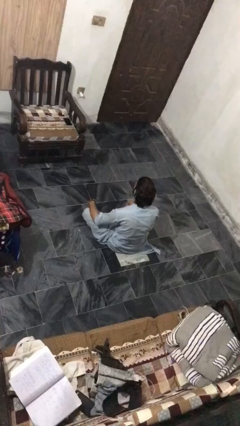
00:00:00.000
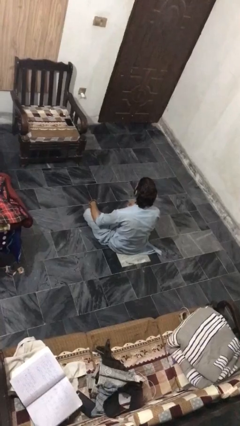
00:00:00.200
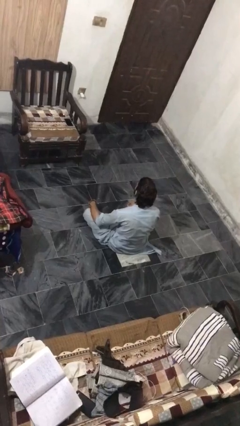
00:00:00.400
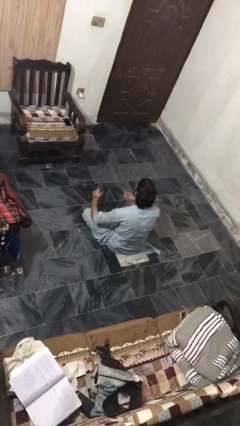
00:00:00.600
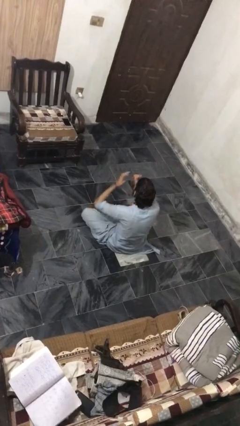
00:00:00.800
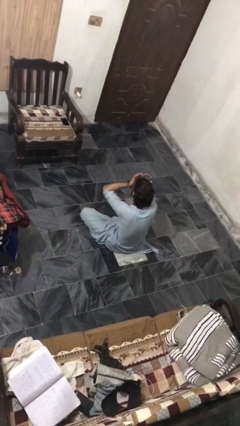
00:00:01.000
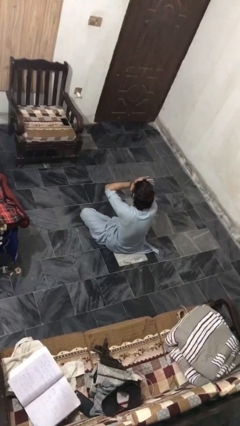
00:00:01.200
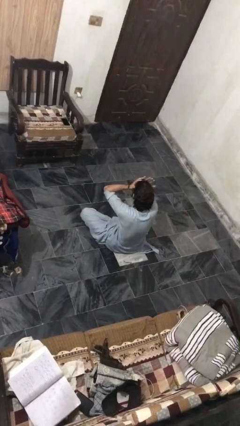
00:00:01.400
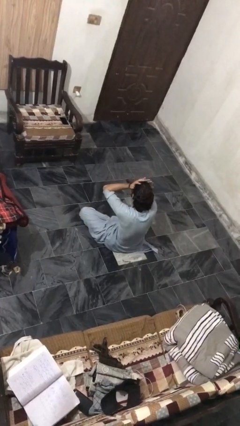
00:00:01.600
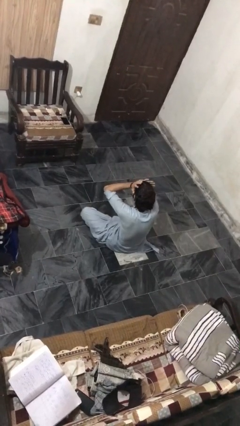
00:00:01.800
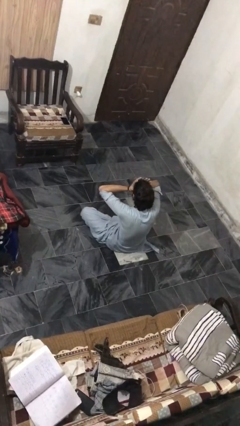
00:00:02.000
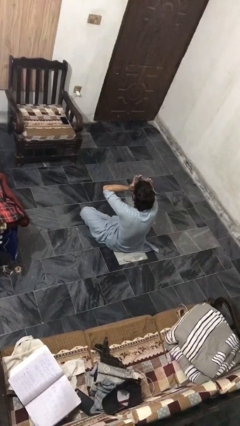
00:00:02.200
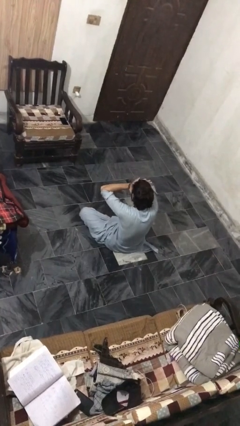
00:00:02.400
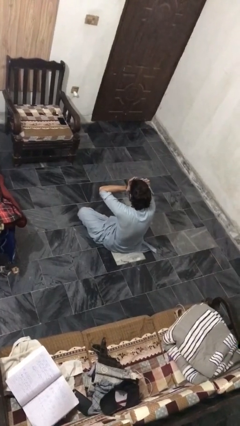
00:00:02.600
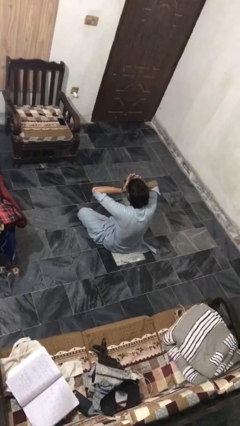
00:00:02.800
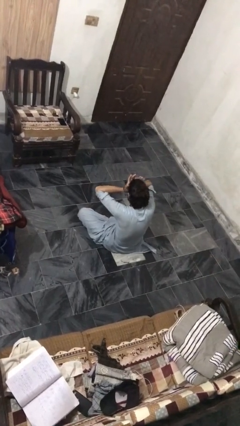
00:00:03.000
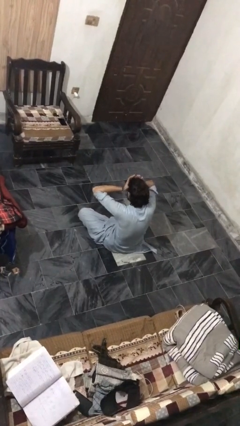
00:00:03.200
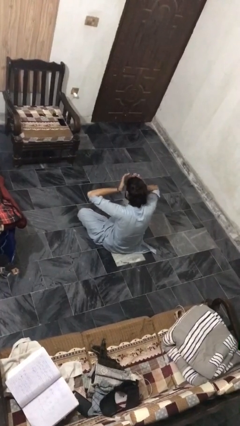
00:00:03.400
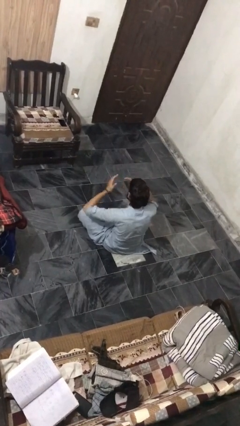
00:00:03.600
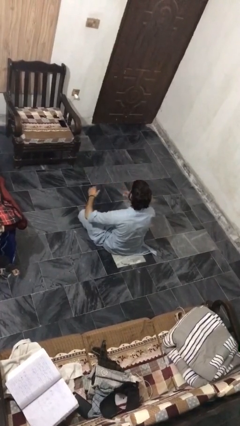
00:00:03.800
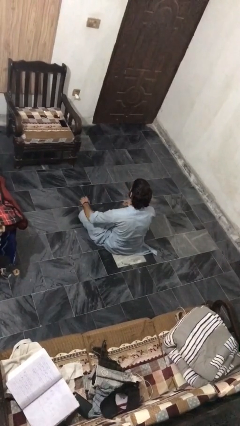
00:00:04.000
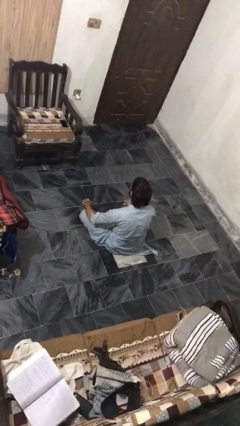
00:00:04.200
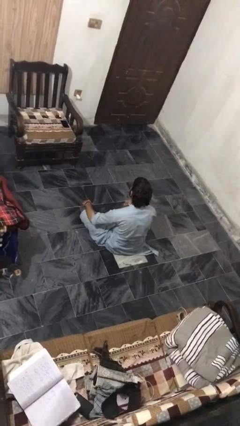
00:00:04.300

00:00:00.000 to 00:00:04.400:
person rubs eyes

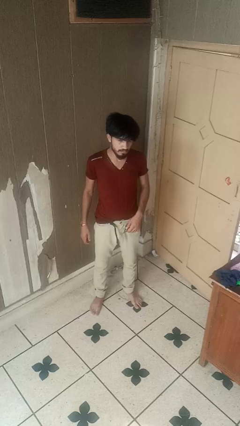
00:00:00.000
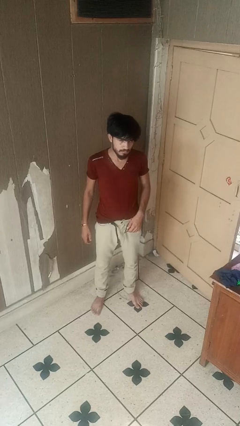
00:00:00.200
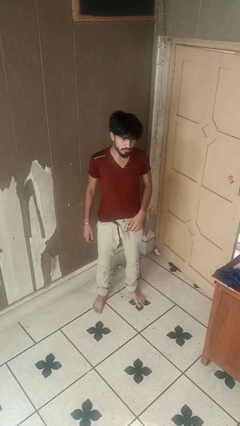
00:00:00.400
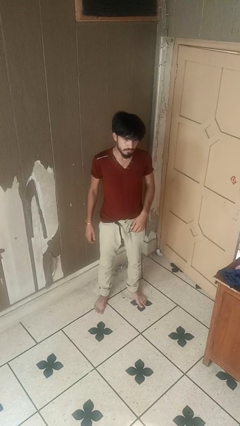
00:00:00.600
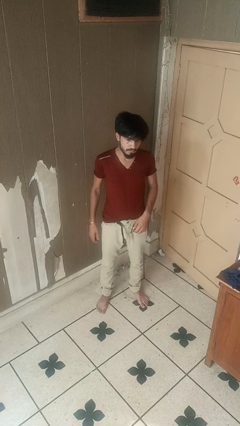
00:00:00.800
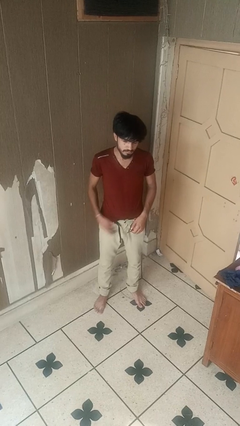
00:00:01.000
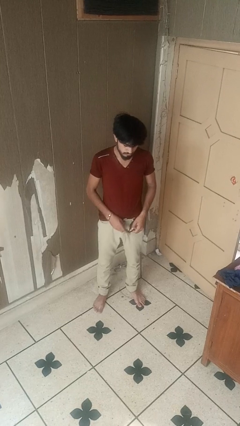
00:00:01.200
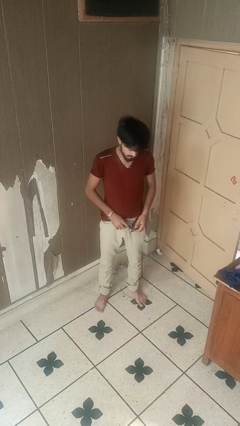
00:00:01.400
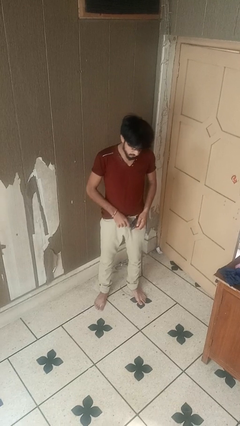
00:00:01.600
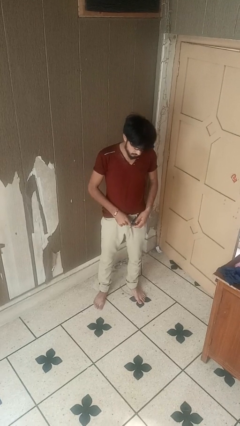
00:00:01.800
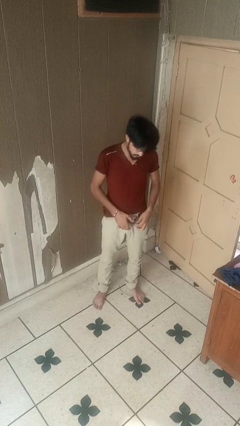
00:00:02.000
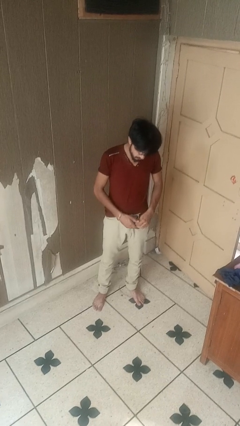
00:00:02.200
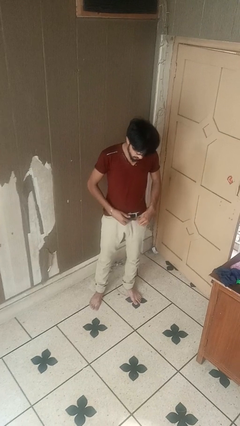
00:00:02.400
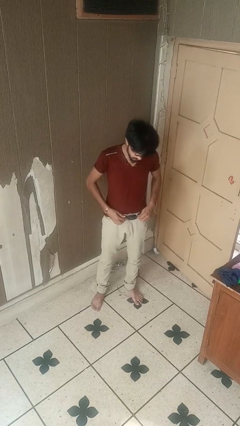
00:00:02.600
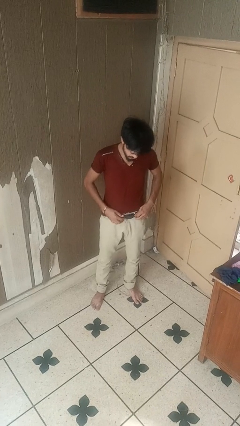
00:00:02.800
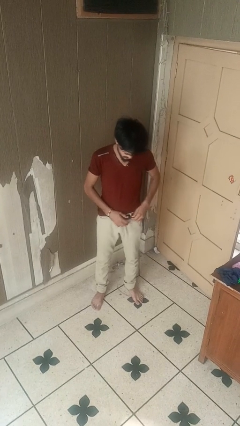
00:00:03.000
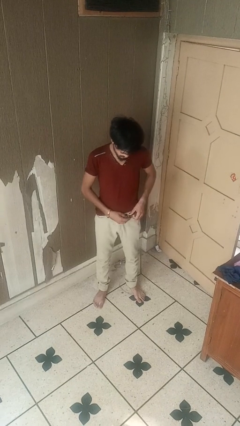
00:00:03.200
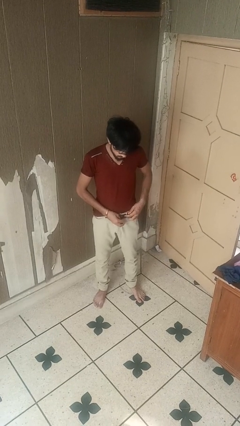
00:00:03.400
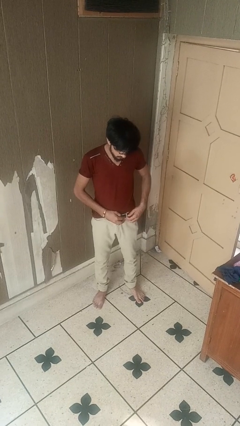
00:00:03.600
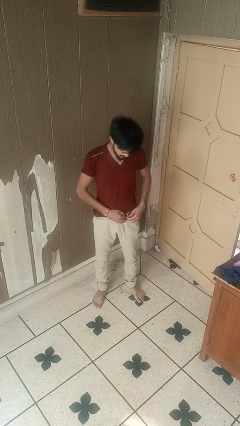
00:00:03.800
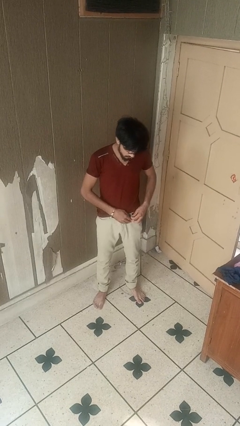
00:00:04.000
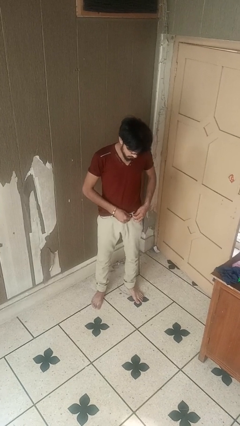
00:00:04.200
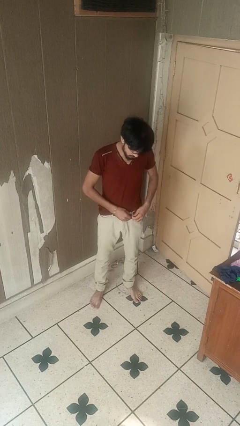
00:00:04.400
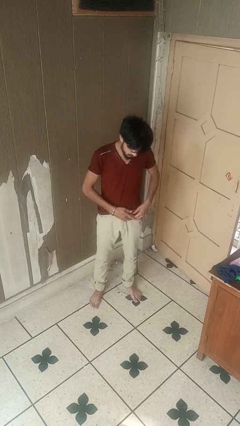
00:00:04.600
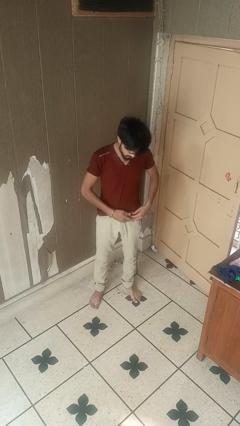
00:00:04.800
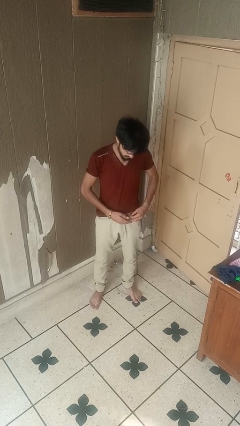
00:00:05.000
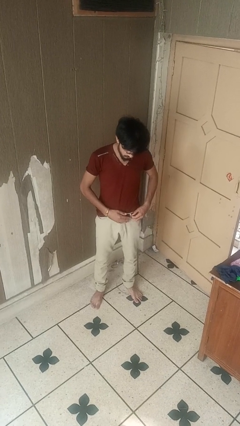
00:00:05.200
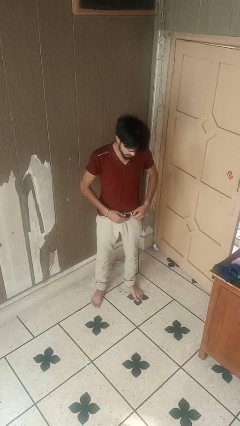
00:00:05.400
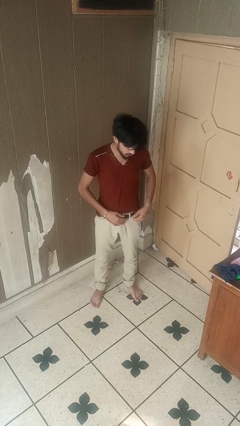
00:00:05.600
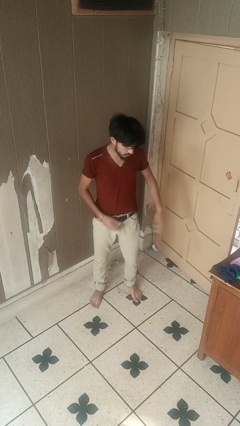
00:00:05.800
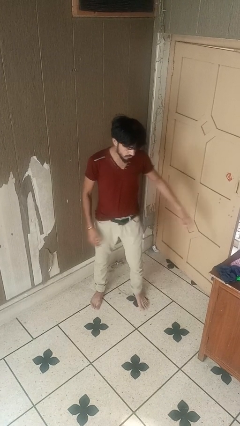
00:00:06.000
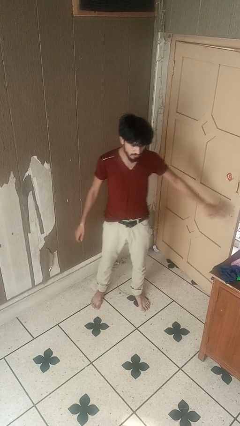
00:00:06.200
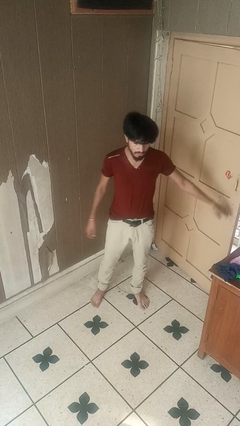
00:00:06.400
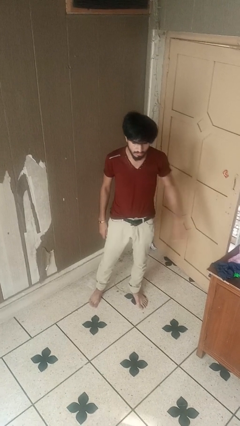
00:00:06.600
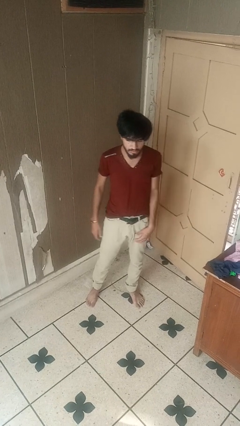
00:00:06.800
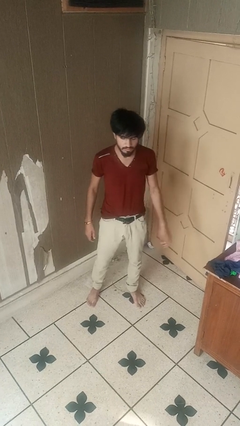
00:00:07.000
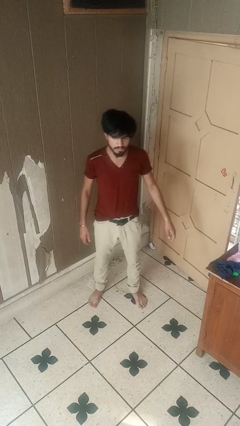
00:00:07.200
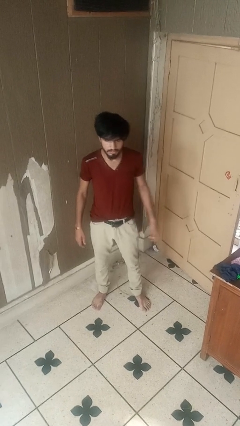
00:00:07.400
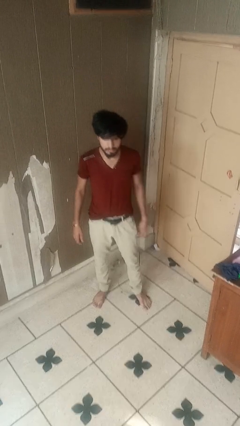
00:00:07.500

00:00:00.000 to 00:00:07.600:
person puts on belt

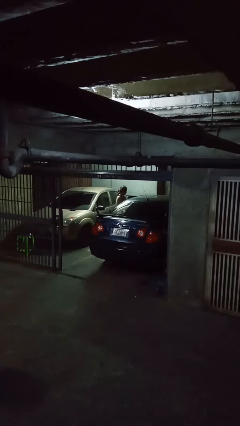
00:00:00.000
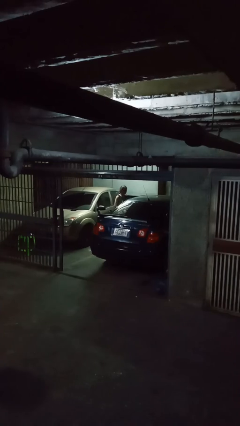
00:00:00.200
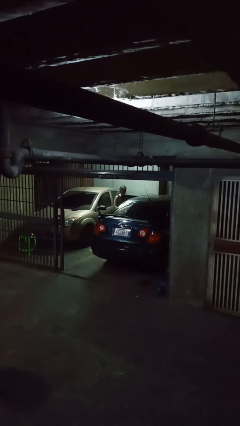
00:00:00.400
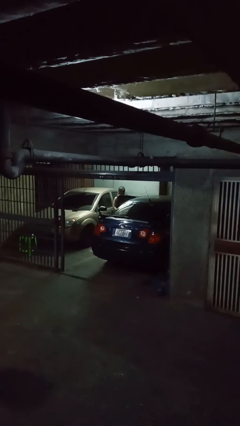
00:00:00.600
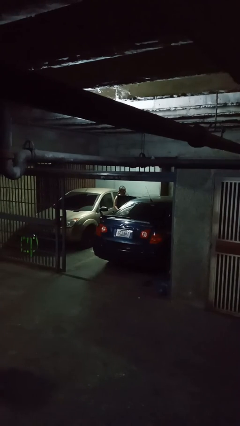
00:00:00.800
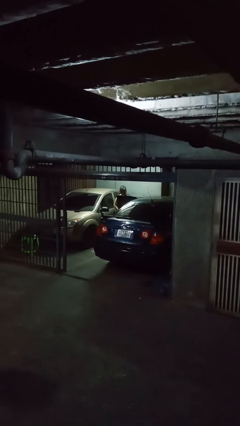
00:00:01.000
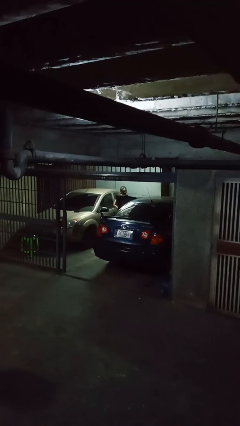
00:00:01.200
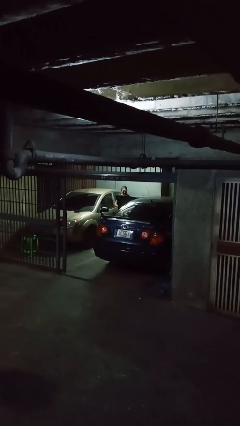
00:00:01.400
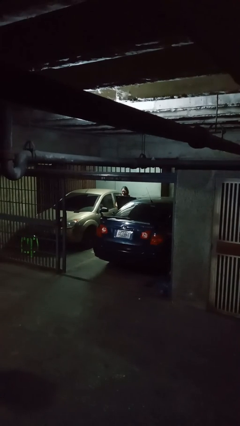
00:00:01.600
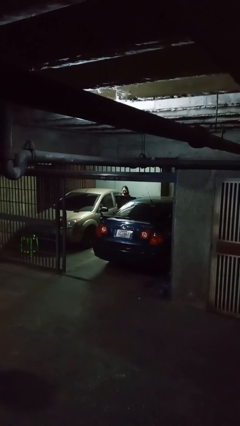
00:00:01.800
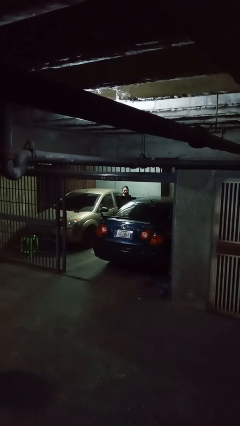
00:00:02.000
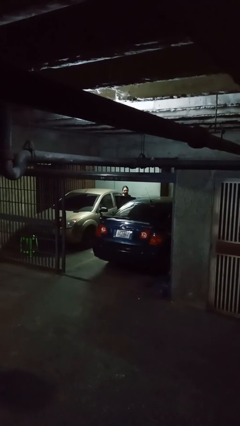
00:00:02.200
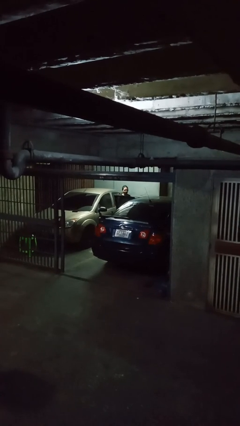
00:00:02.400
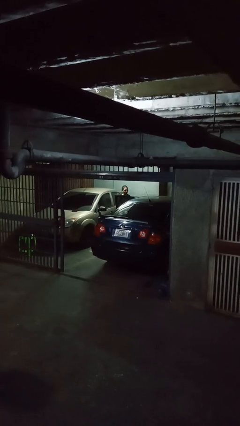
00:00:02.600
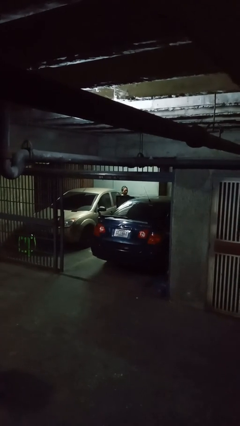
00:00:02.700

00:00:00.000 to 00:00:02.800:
person opens car door

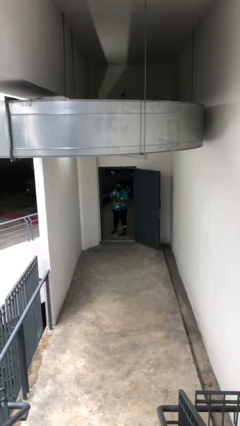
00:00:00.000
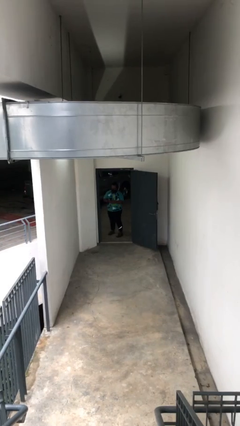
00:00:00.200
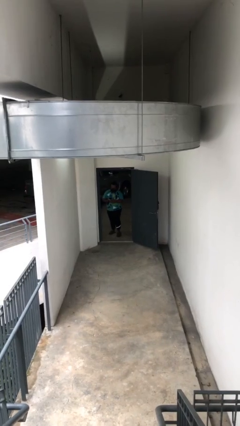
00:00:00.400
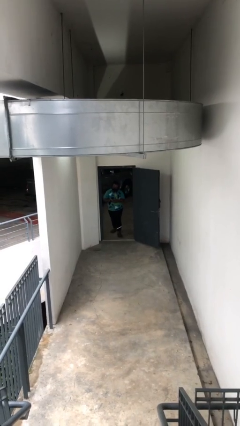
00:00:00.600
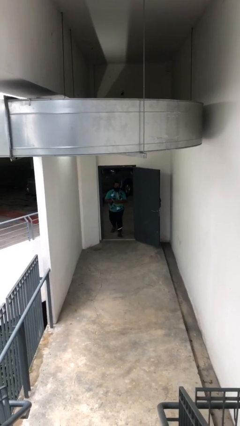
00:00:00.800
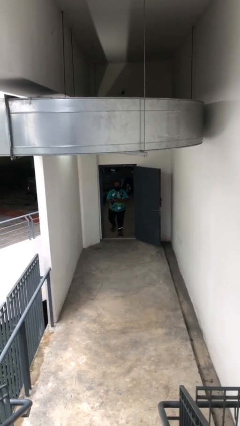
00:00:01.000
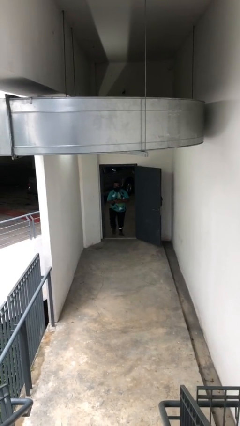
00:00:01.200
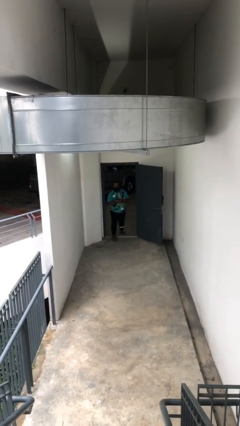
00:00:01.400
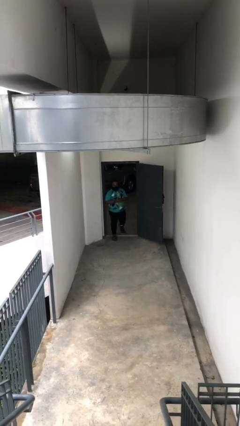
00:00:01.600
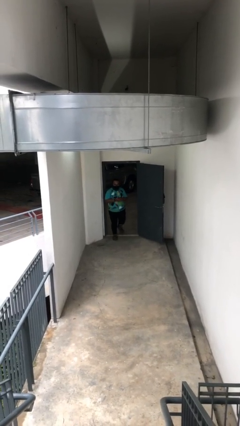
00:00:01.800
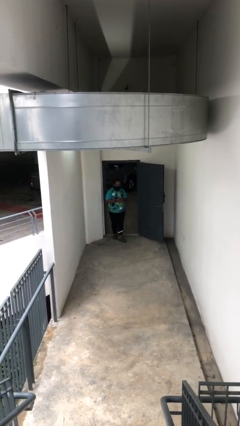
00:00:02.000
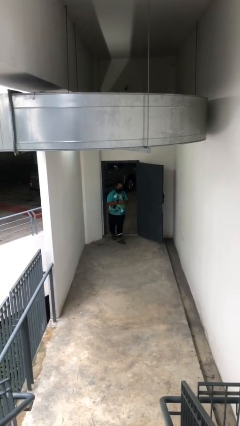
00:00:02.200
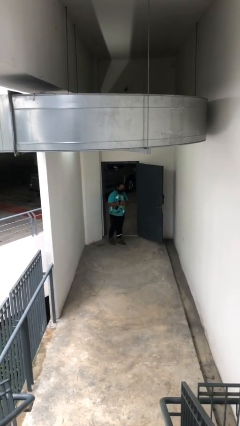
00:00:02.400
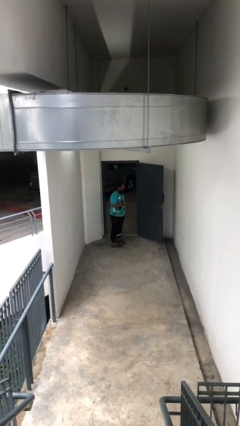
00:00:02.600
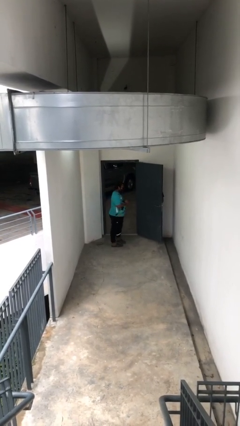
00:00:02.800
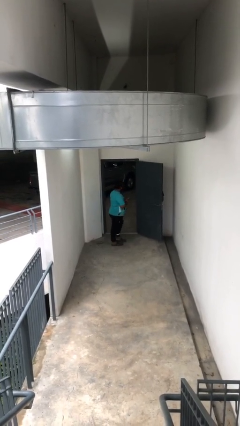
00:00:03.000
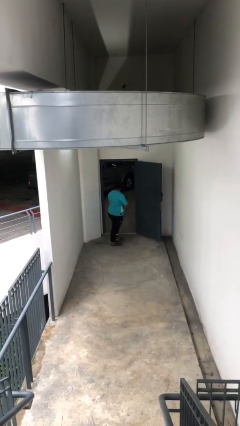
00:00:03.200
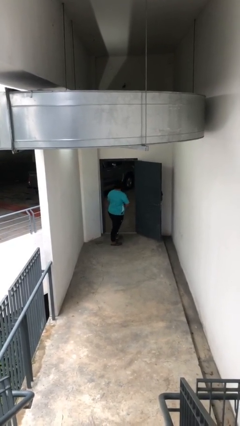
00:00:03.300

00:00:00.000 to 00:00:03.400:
person enters scene through structure
